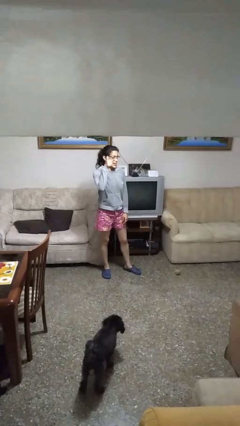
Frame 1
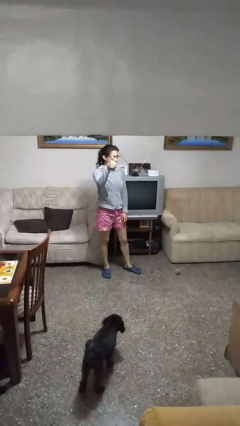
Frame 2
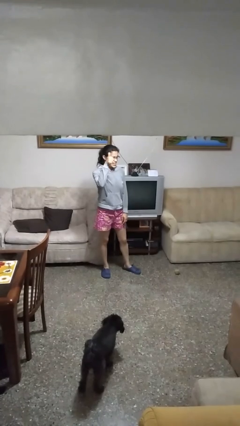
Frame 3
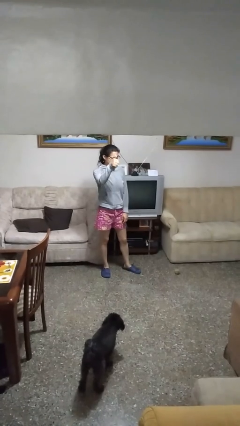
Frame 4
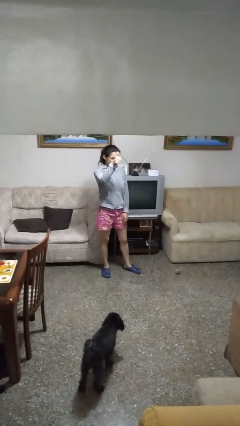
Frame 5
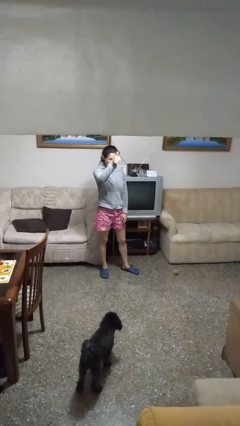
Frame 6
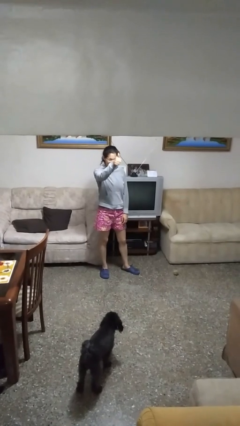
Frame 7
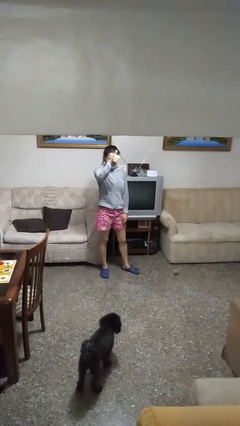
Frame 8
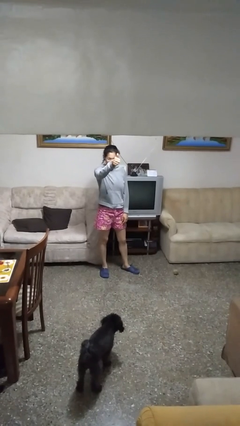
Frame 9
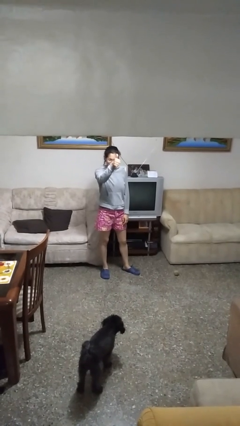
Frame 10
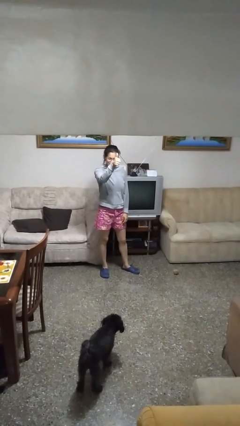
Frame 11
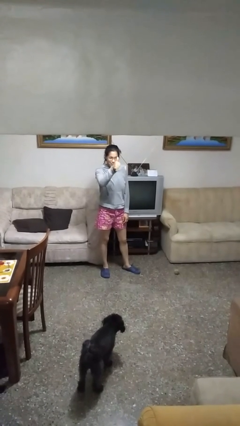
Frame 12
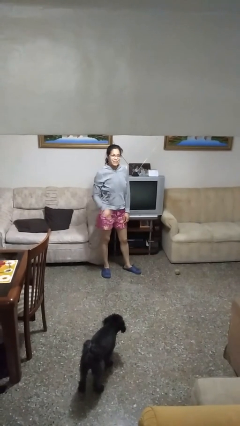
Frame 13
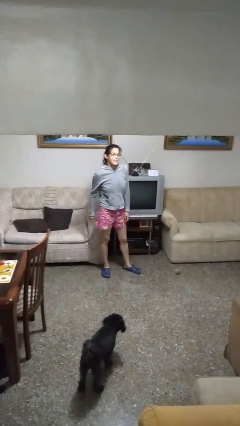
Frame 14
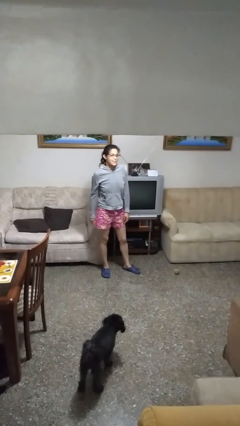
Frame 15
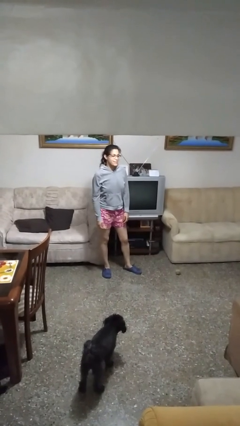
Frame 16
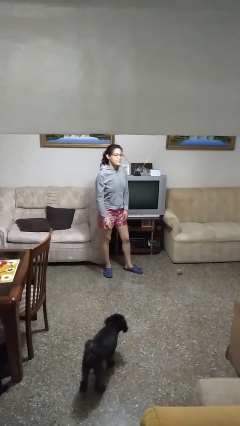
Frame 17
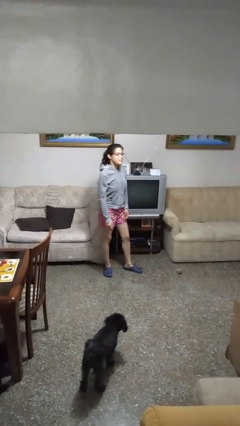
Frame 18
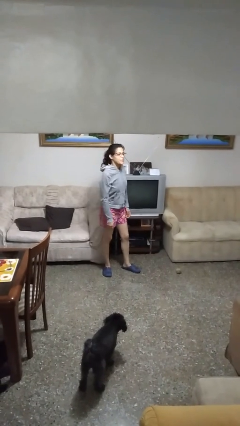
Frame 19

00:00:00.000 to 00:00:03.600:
person gestures thumbs up

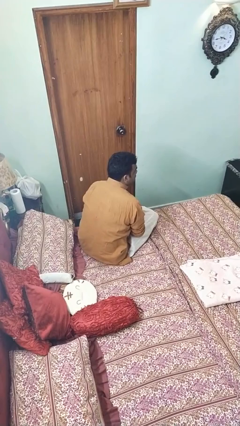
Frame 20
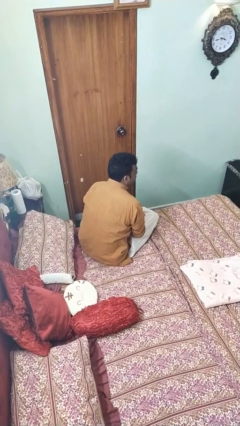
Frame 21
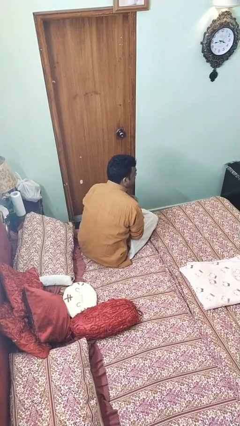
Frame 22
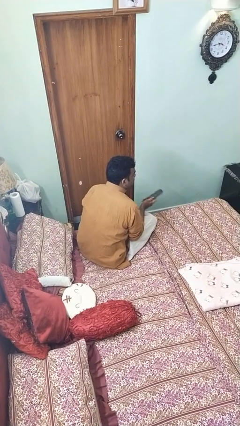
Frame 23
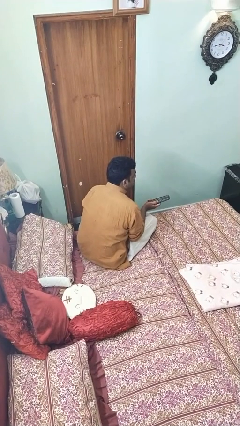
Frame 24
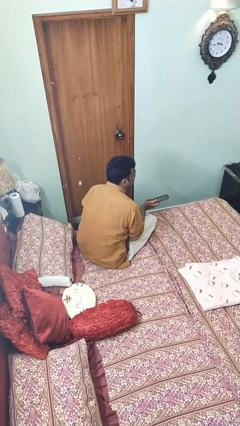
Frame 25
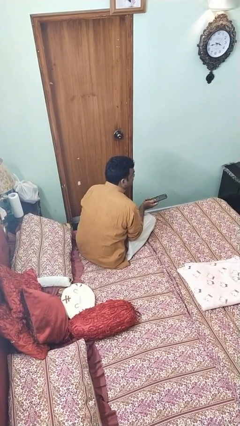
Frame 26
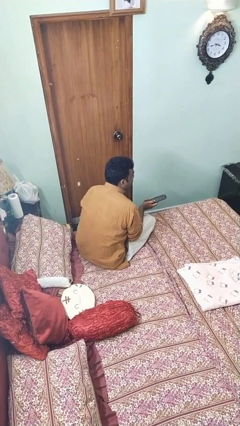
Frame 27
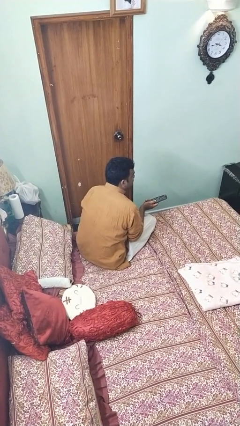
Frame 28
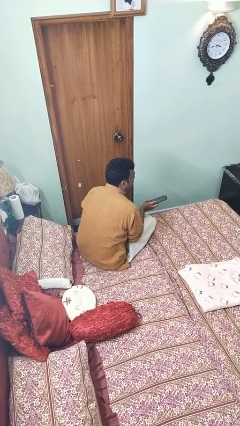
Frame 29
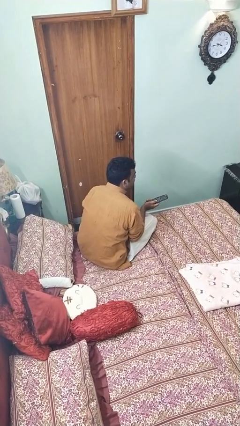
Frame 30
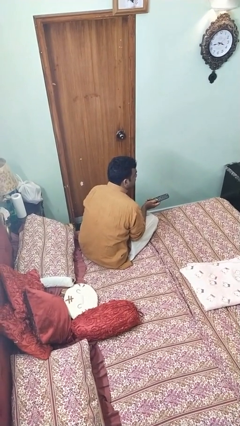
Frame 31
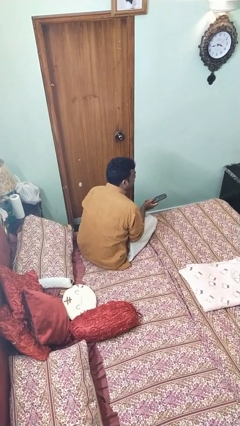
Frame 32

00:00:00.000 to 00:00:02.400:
person uses television remote

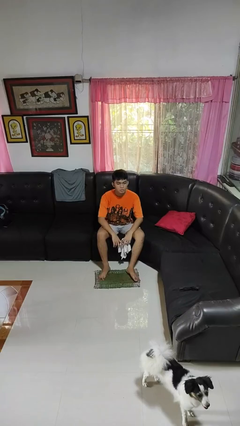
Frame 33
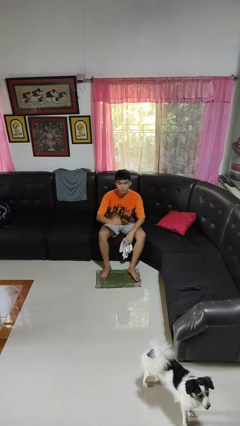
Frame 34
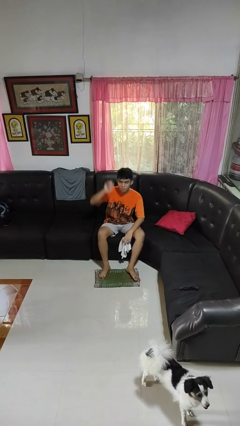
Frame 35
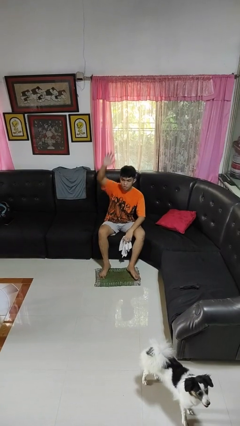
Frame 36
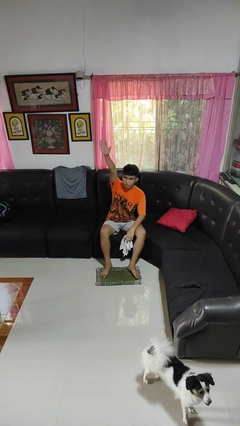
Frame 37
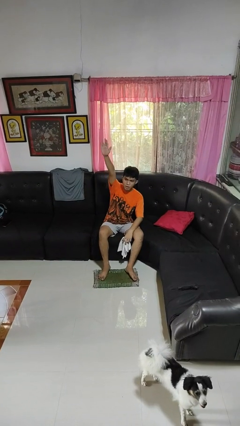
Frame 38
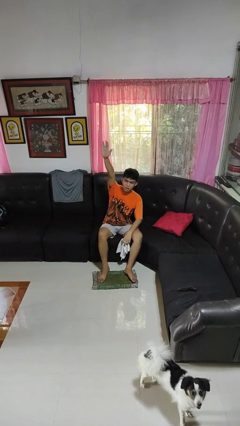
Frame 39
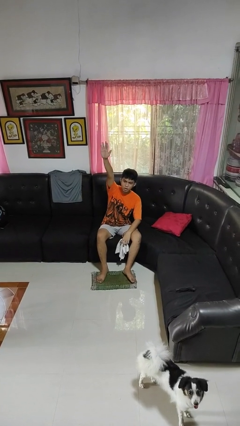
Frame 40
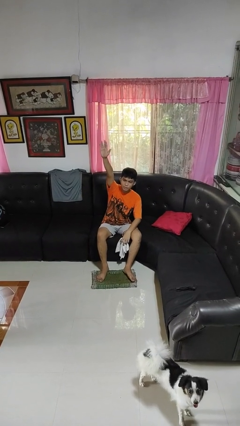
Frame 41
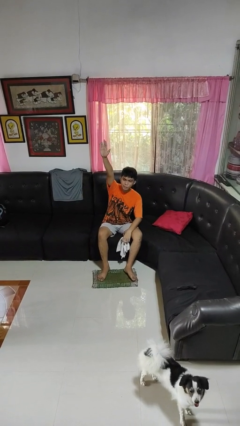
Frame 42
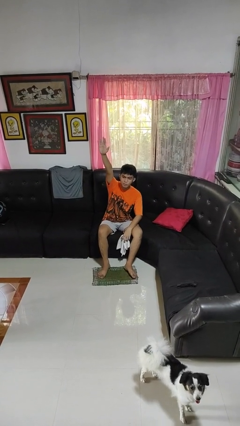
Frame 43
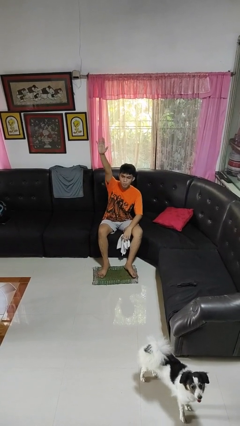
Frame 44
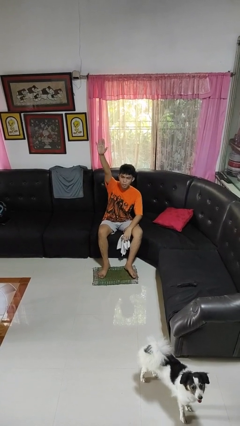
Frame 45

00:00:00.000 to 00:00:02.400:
person gestures raise hand

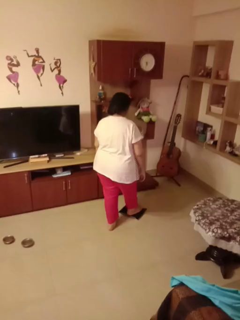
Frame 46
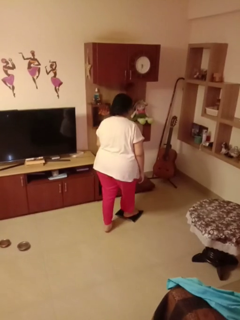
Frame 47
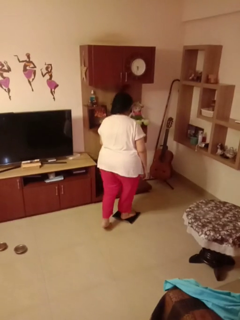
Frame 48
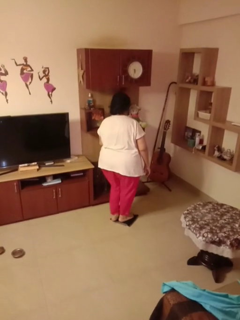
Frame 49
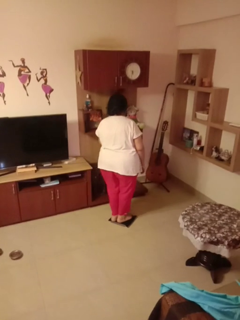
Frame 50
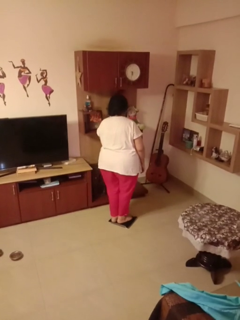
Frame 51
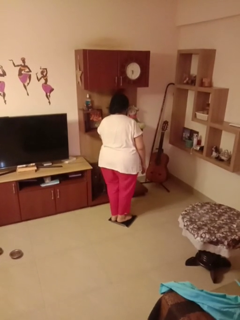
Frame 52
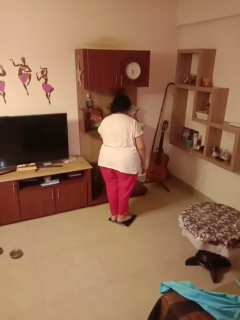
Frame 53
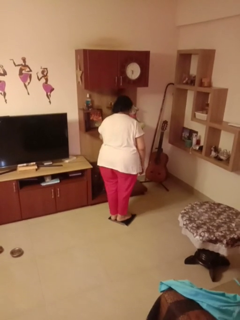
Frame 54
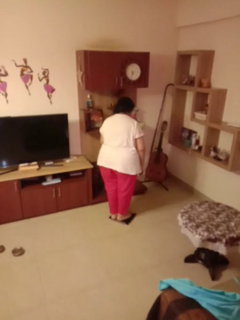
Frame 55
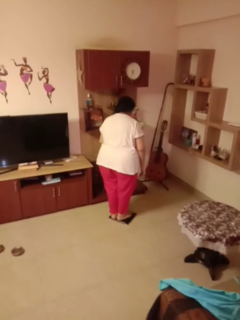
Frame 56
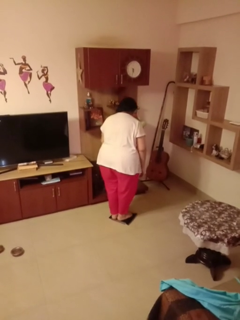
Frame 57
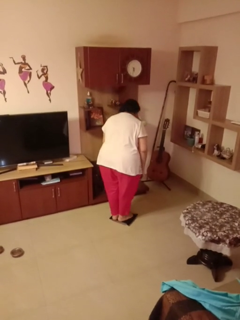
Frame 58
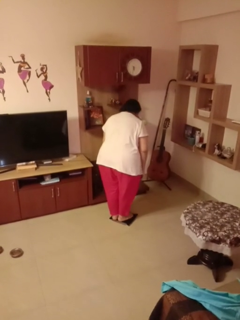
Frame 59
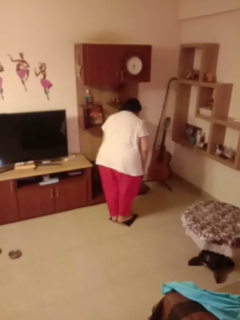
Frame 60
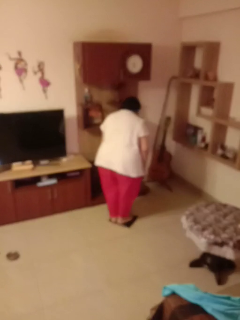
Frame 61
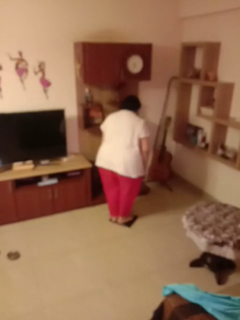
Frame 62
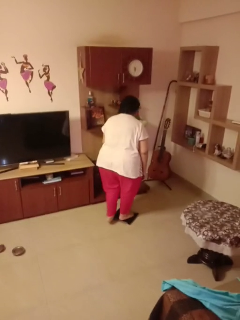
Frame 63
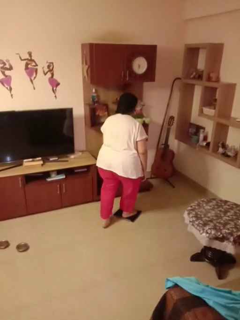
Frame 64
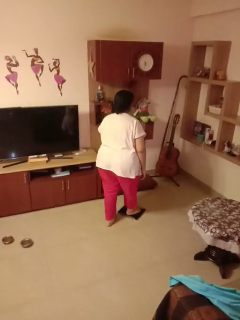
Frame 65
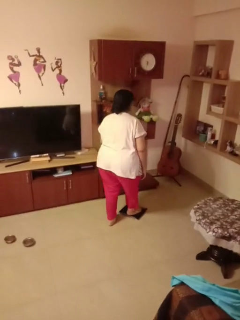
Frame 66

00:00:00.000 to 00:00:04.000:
person uses bodyweight scale

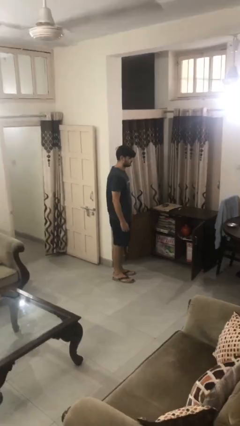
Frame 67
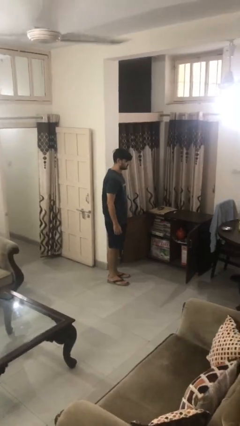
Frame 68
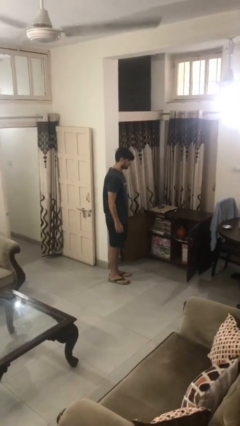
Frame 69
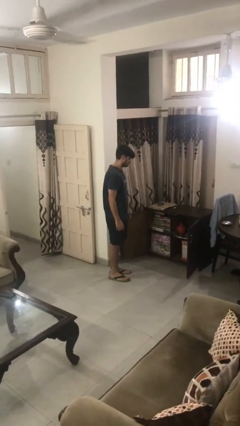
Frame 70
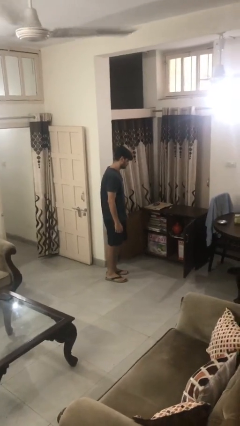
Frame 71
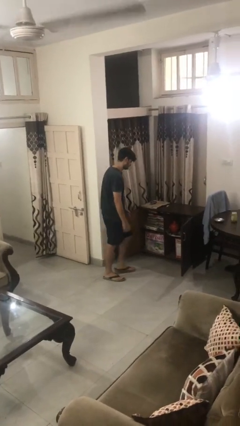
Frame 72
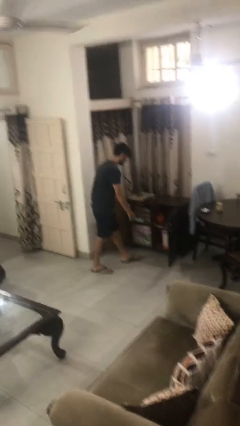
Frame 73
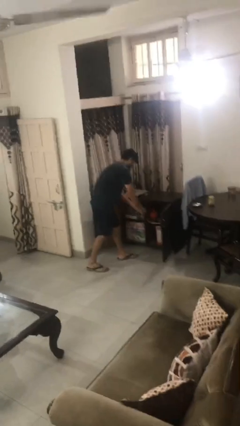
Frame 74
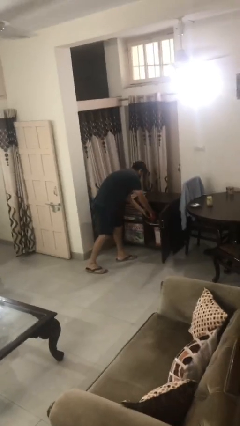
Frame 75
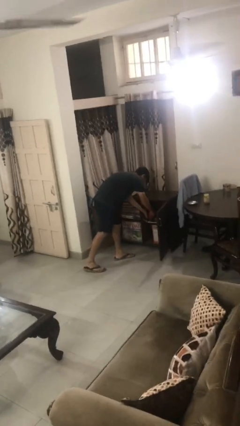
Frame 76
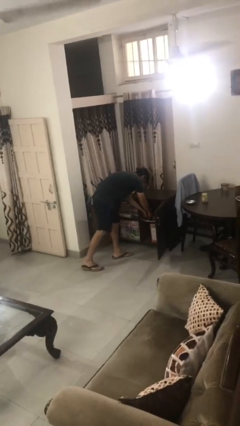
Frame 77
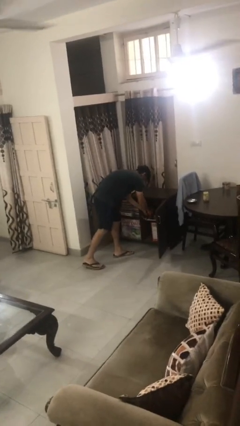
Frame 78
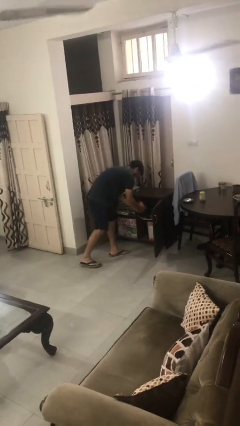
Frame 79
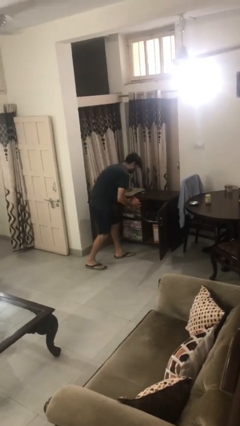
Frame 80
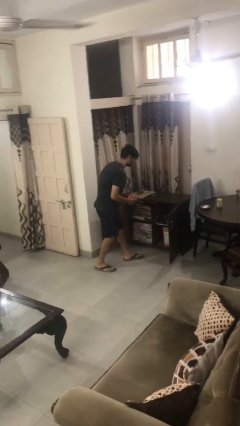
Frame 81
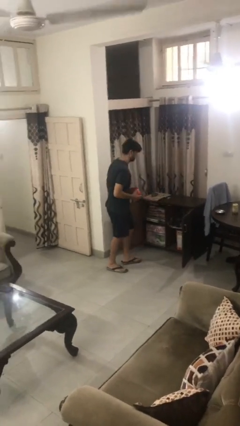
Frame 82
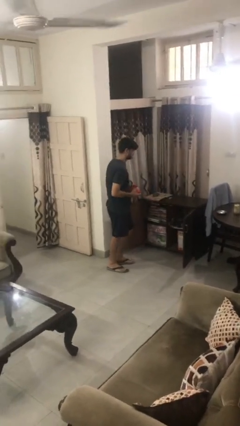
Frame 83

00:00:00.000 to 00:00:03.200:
person picks up object from cabinet

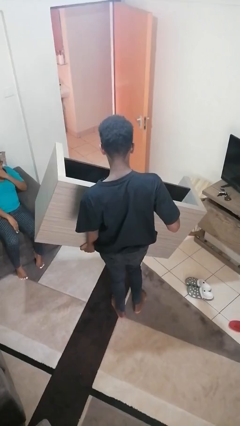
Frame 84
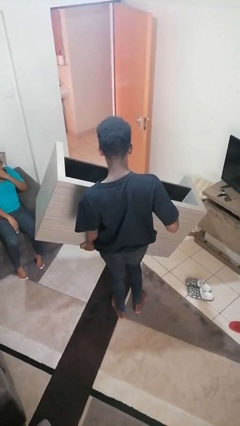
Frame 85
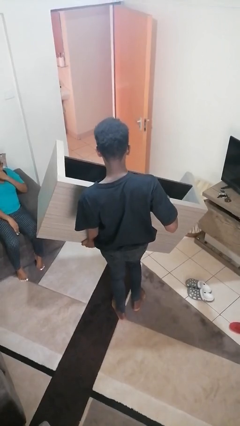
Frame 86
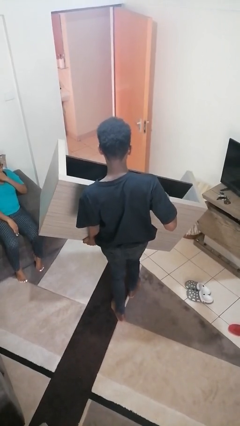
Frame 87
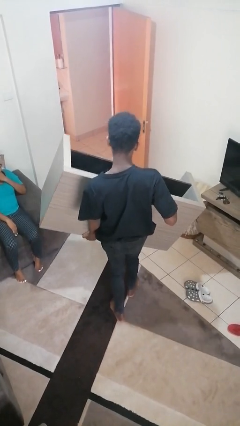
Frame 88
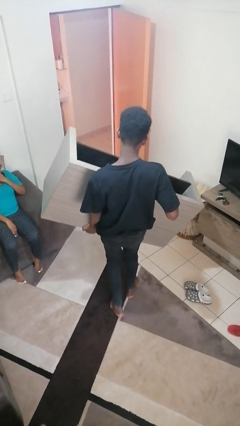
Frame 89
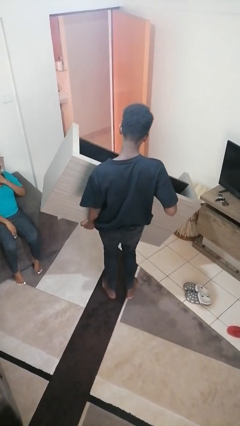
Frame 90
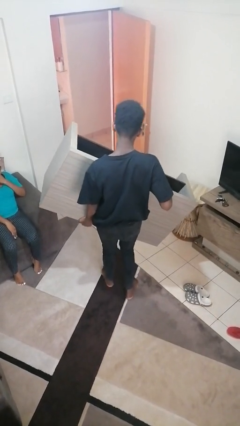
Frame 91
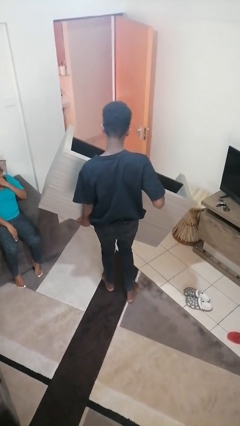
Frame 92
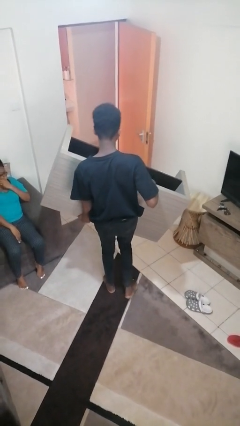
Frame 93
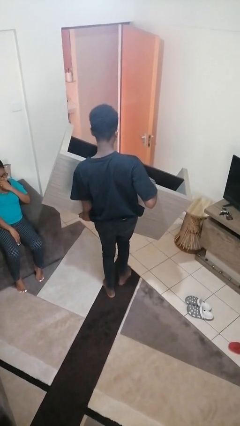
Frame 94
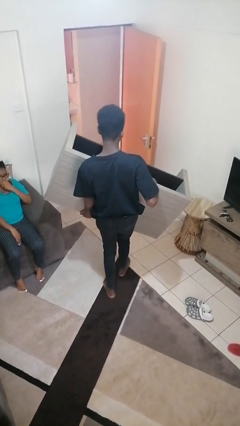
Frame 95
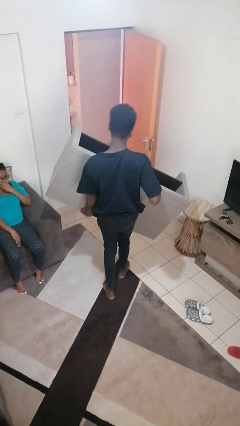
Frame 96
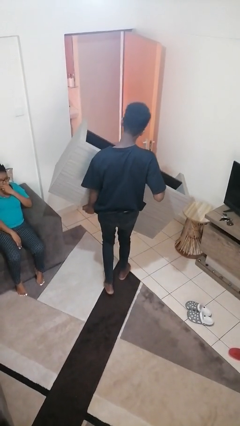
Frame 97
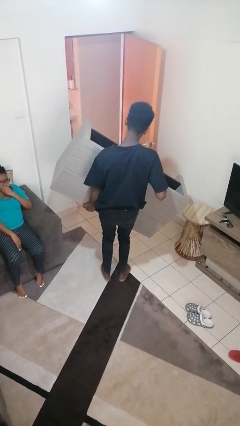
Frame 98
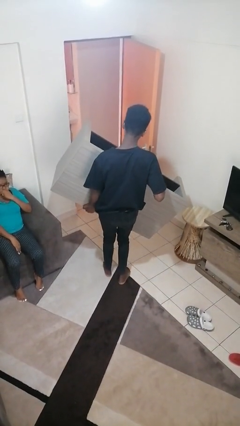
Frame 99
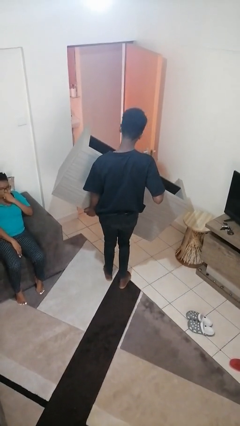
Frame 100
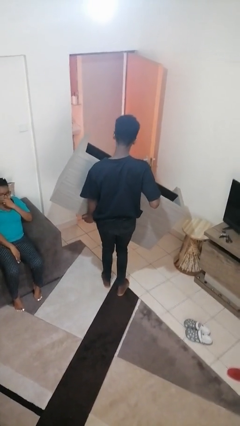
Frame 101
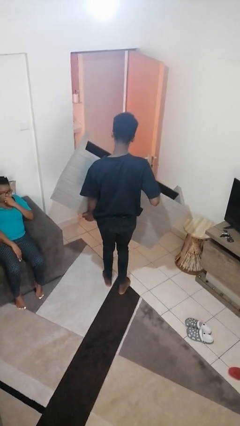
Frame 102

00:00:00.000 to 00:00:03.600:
person carries furniture
